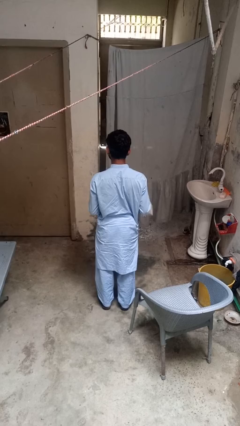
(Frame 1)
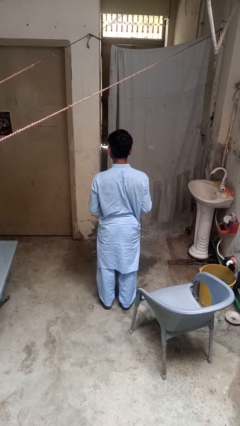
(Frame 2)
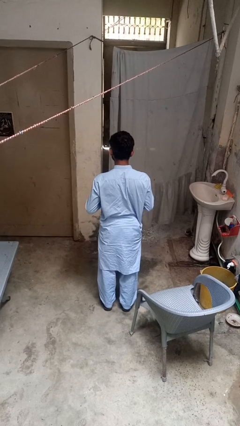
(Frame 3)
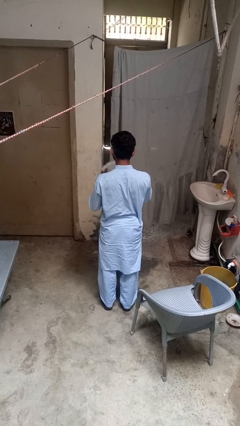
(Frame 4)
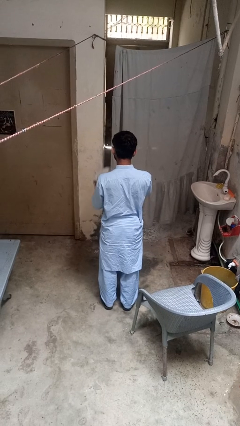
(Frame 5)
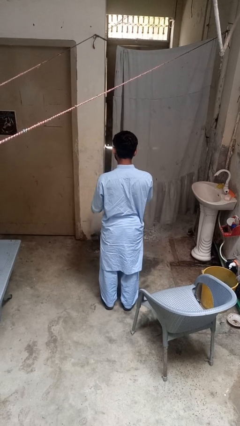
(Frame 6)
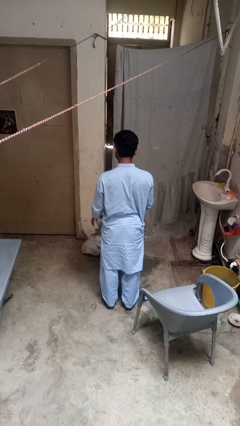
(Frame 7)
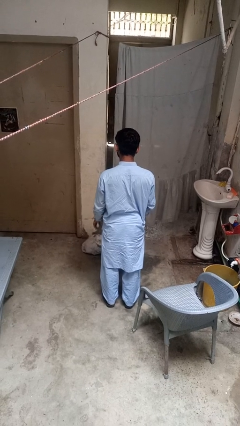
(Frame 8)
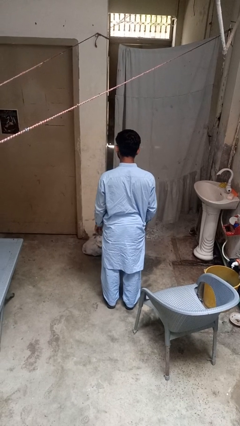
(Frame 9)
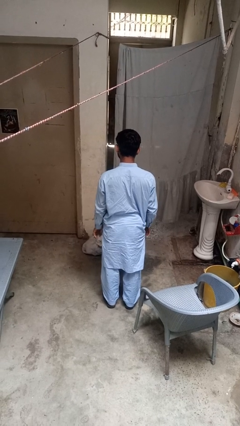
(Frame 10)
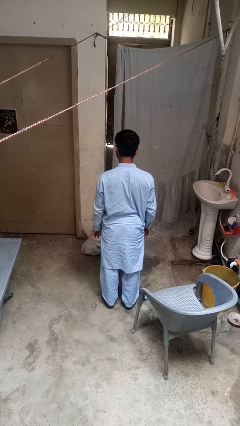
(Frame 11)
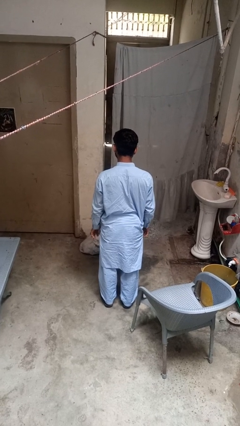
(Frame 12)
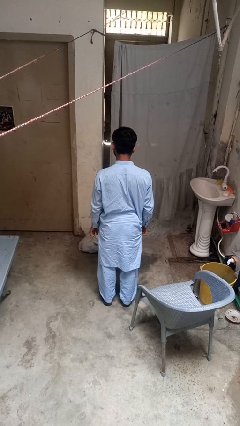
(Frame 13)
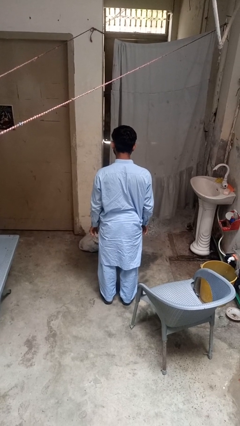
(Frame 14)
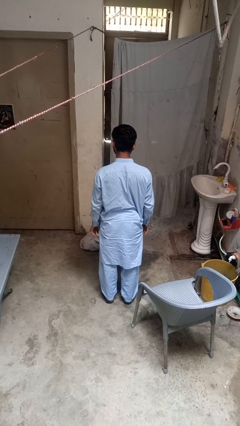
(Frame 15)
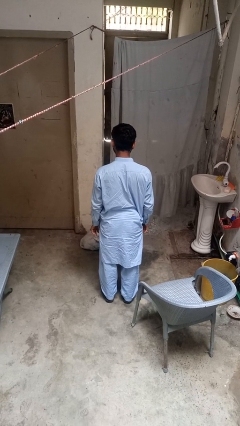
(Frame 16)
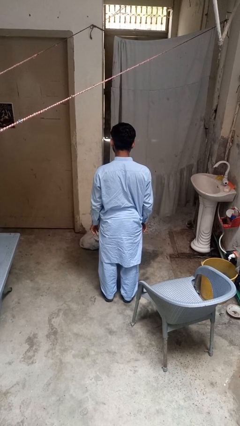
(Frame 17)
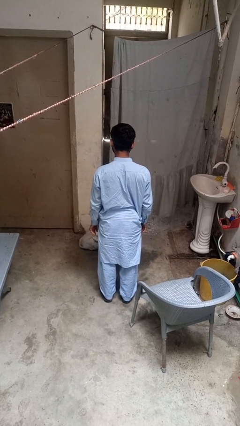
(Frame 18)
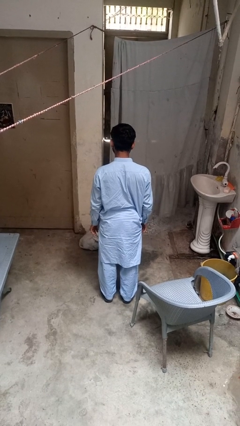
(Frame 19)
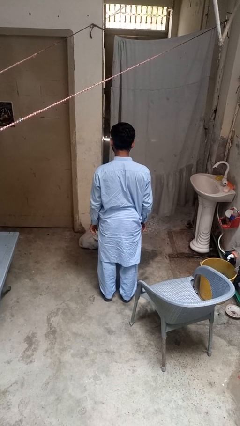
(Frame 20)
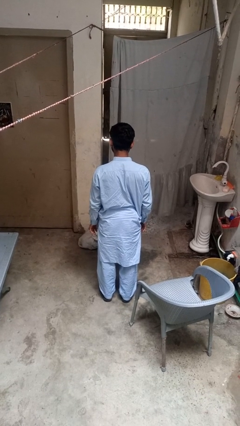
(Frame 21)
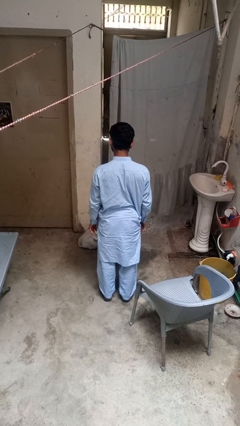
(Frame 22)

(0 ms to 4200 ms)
person throws object to ground

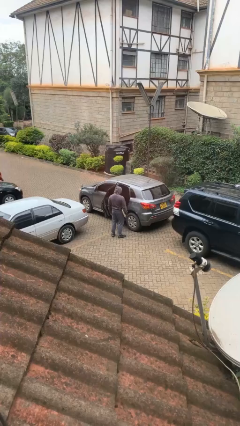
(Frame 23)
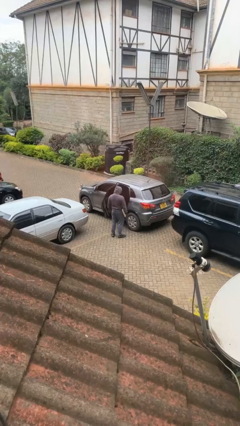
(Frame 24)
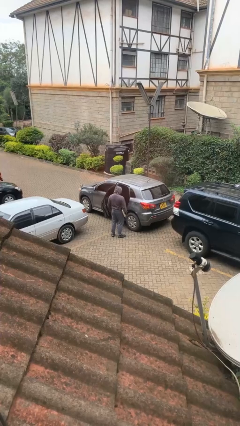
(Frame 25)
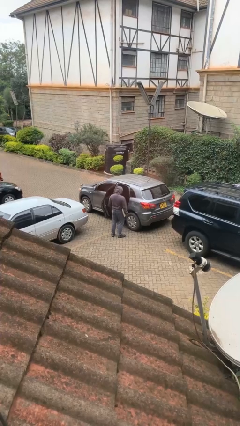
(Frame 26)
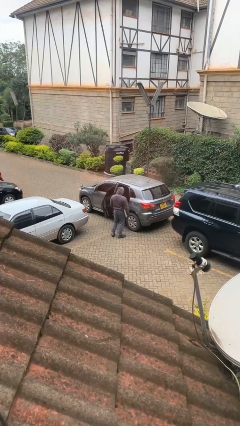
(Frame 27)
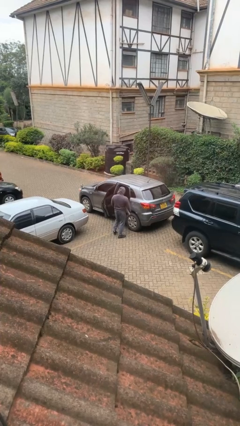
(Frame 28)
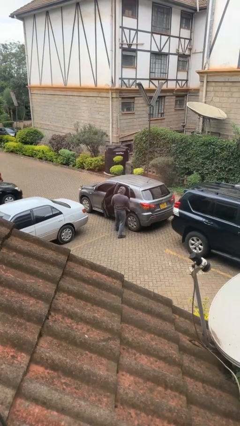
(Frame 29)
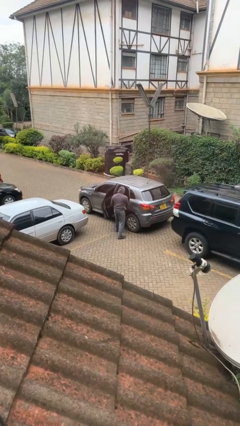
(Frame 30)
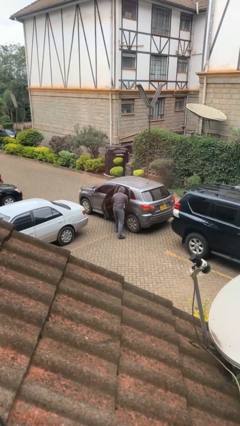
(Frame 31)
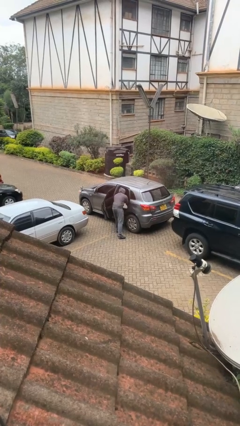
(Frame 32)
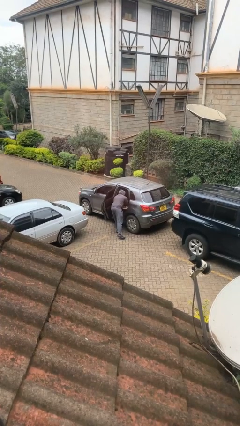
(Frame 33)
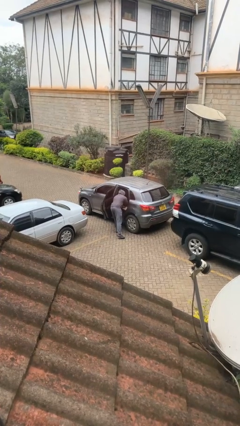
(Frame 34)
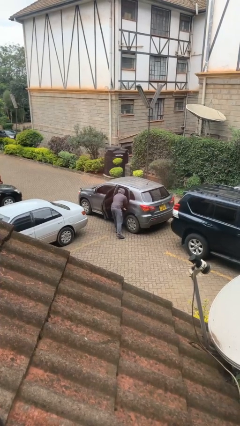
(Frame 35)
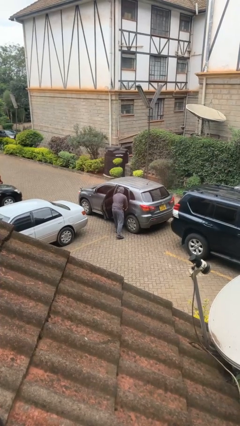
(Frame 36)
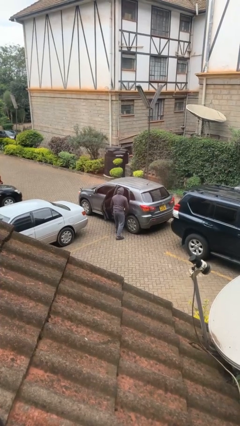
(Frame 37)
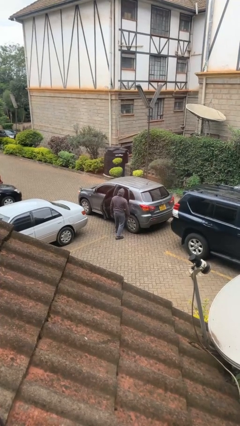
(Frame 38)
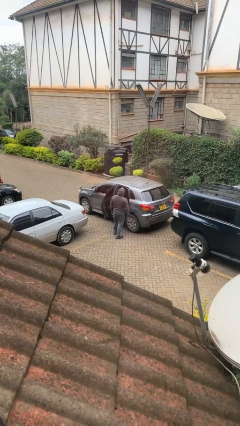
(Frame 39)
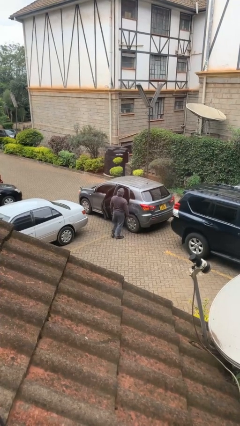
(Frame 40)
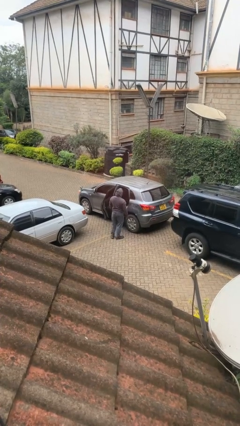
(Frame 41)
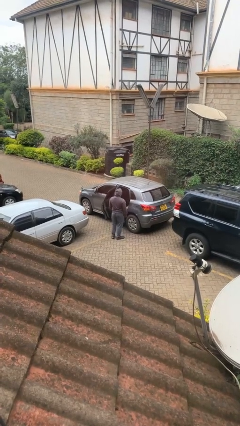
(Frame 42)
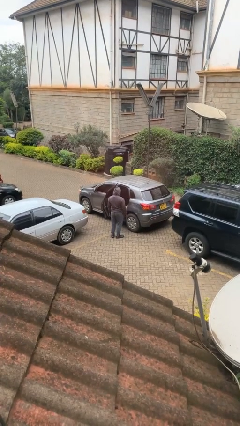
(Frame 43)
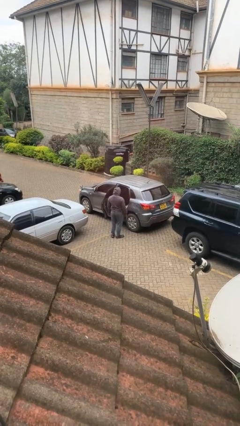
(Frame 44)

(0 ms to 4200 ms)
person loads car

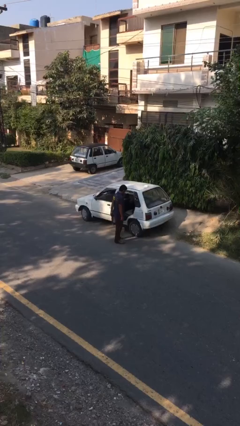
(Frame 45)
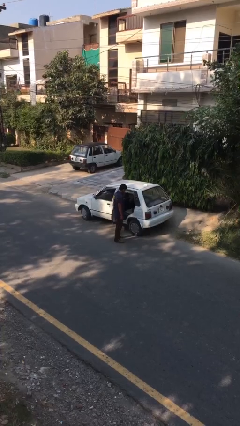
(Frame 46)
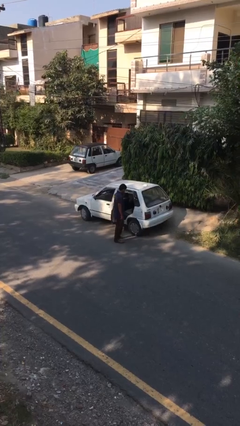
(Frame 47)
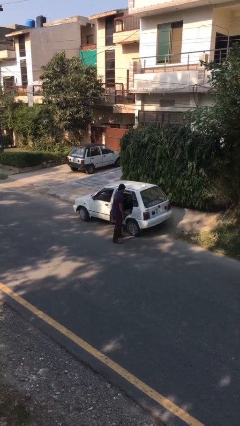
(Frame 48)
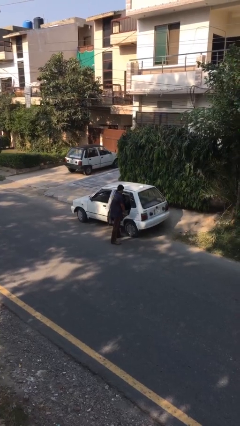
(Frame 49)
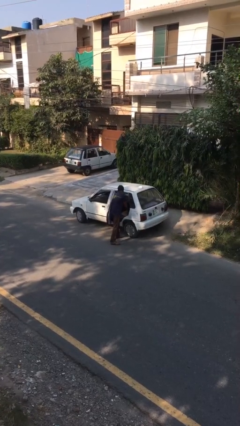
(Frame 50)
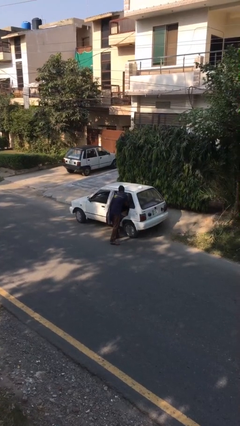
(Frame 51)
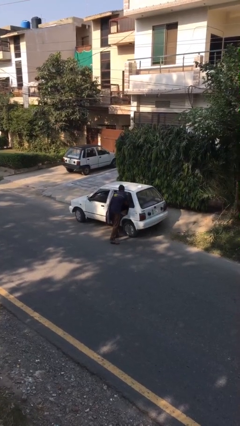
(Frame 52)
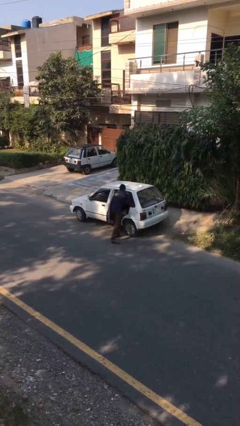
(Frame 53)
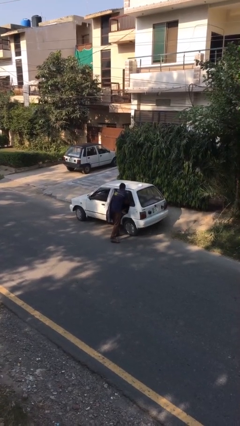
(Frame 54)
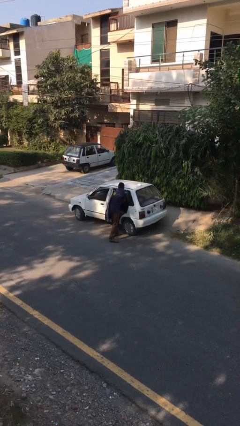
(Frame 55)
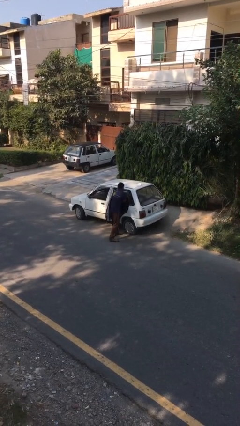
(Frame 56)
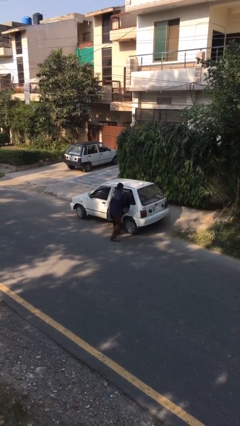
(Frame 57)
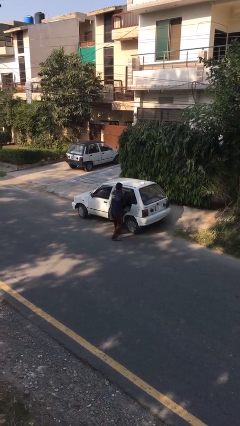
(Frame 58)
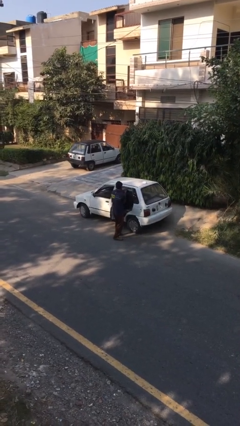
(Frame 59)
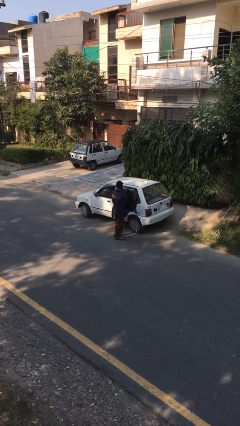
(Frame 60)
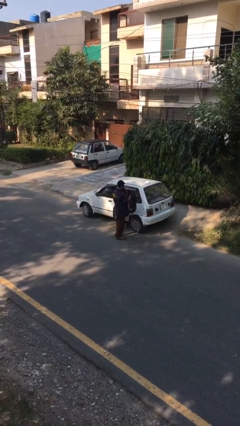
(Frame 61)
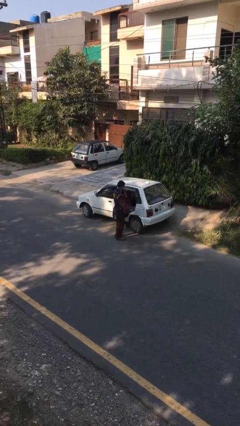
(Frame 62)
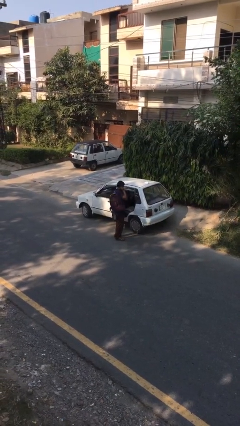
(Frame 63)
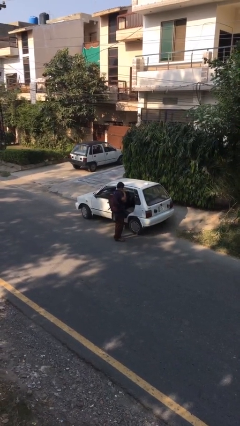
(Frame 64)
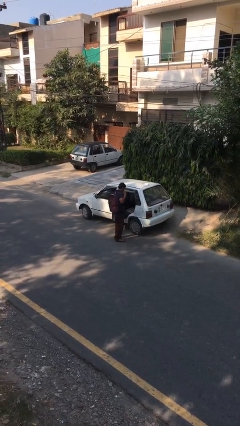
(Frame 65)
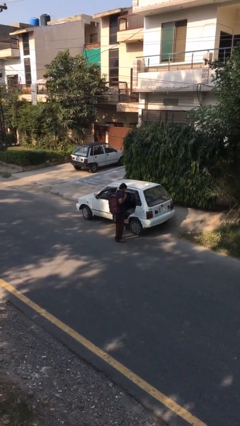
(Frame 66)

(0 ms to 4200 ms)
person unloads car

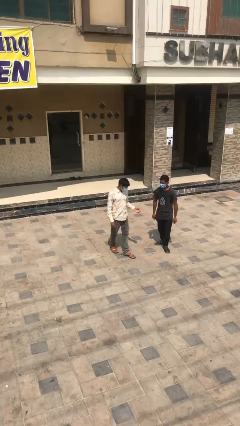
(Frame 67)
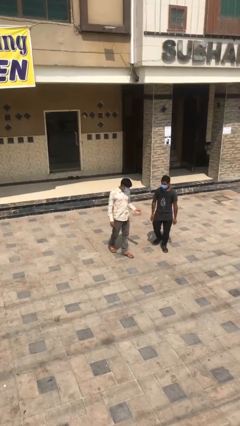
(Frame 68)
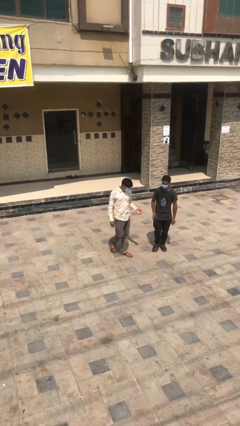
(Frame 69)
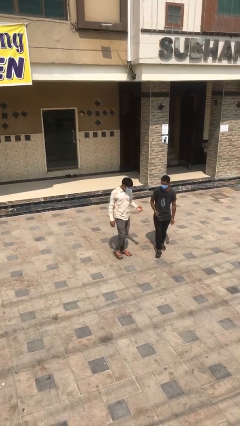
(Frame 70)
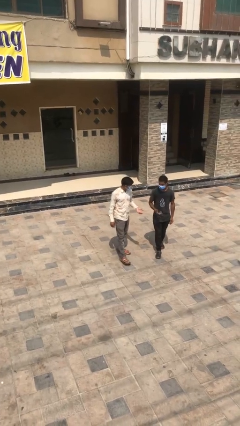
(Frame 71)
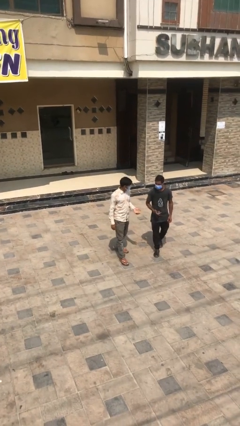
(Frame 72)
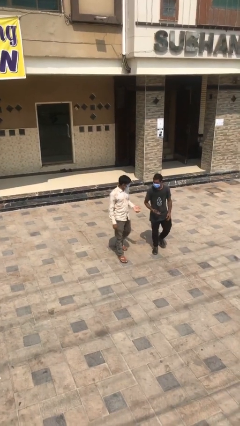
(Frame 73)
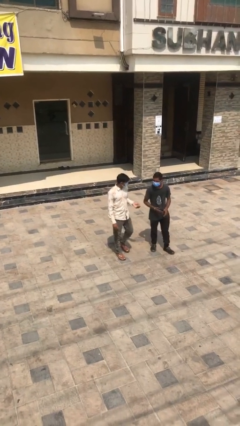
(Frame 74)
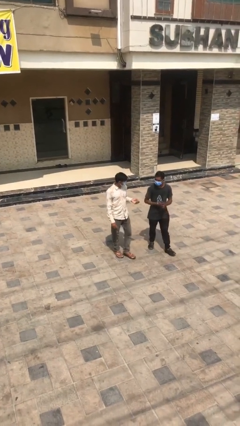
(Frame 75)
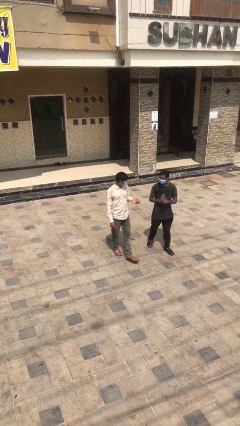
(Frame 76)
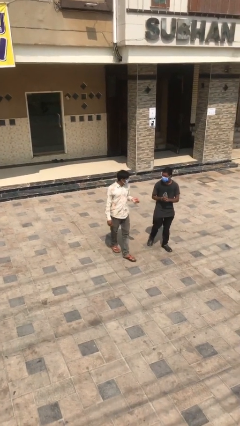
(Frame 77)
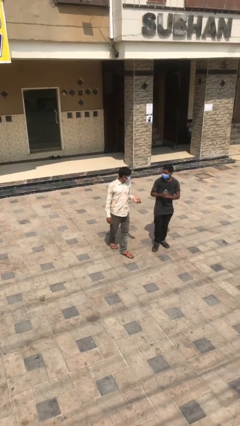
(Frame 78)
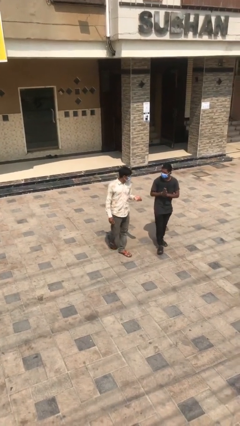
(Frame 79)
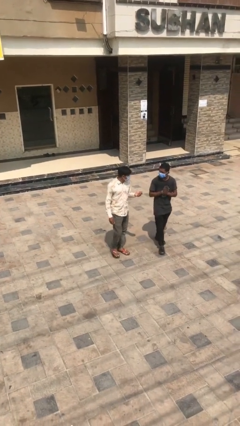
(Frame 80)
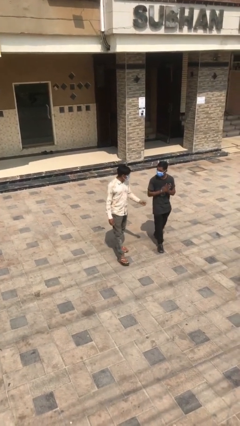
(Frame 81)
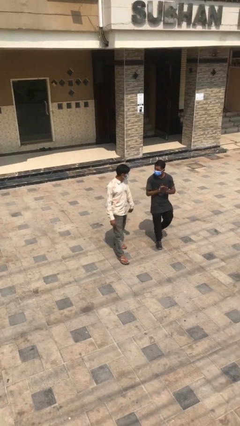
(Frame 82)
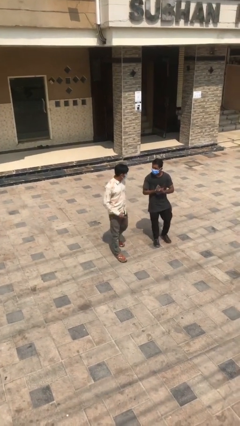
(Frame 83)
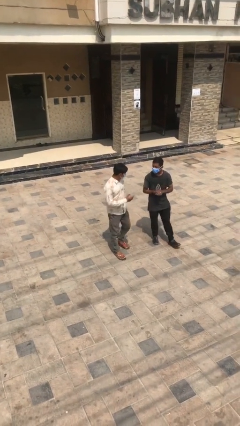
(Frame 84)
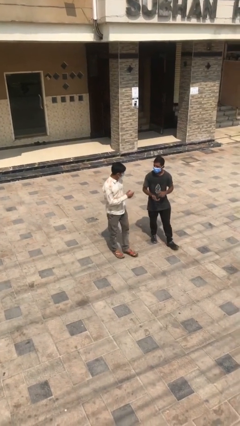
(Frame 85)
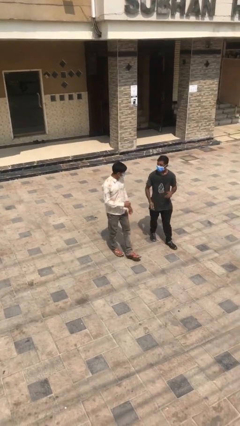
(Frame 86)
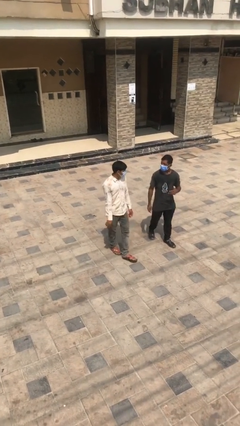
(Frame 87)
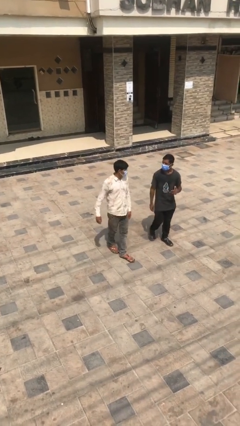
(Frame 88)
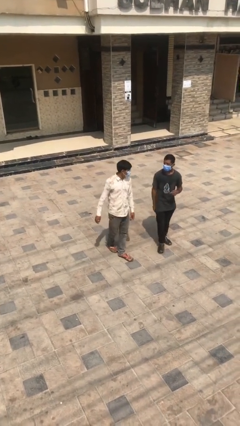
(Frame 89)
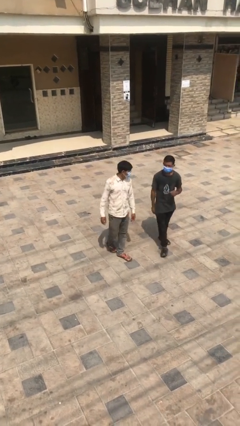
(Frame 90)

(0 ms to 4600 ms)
person talks to person
